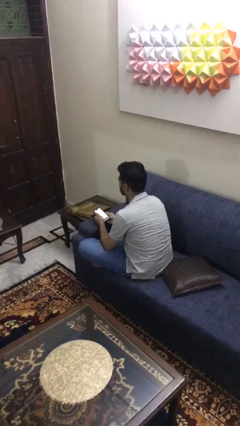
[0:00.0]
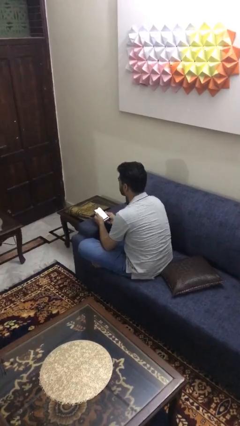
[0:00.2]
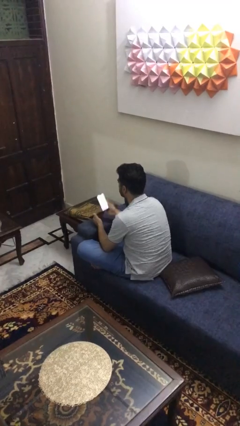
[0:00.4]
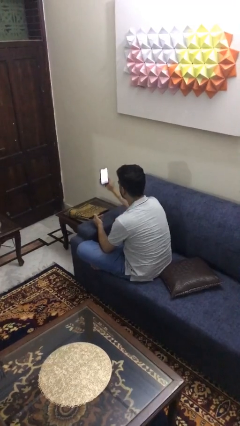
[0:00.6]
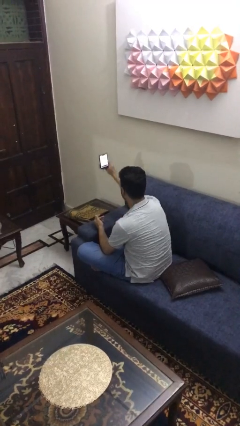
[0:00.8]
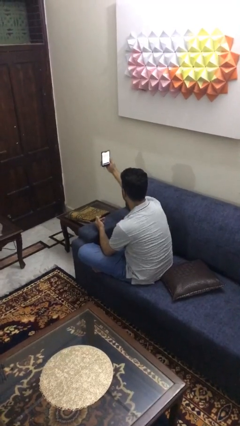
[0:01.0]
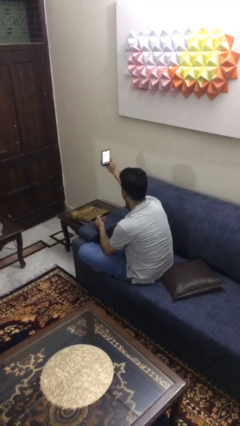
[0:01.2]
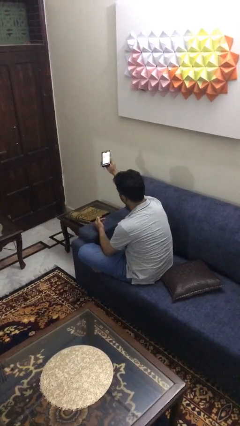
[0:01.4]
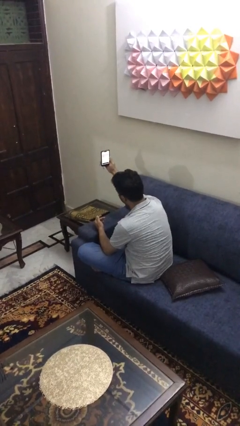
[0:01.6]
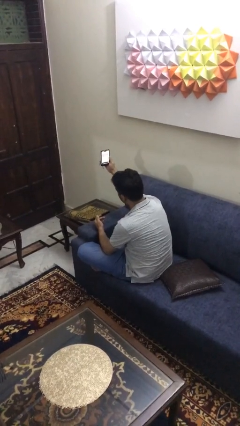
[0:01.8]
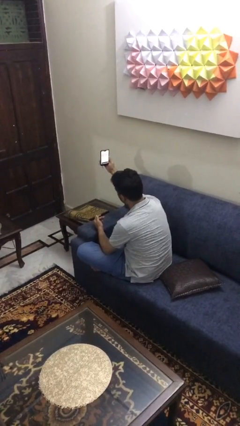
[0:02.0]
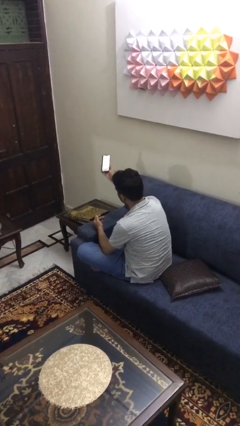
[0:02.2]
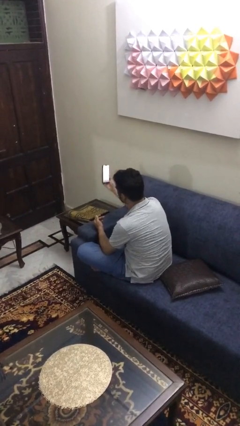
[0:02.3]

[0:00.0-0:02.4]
person takes selfie

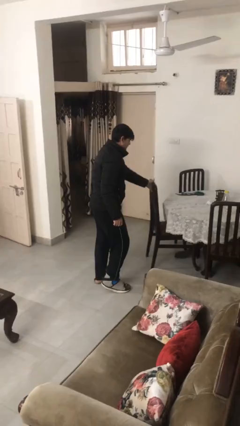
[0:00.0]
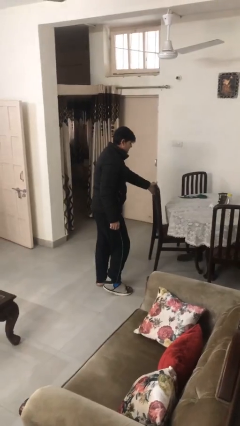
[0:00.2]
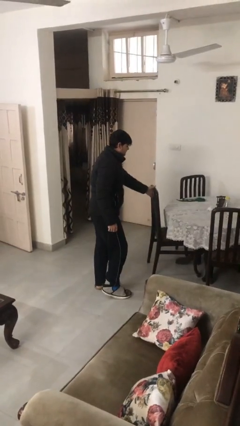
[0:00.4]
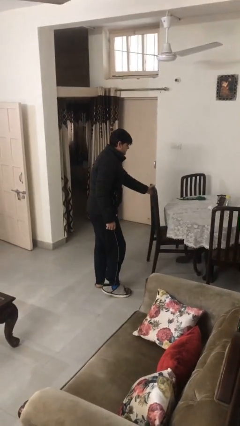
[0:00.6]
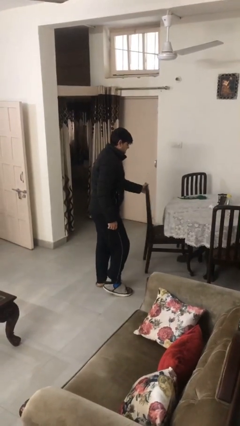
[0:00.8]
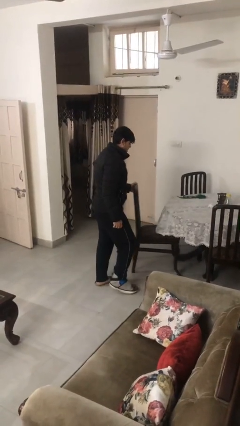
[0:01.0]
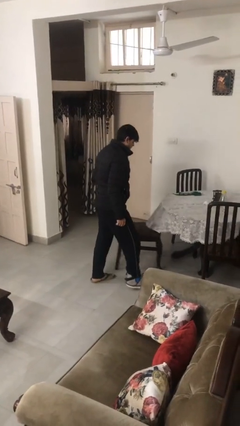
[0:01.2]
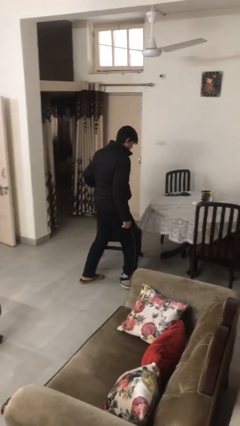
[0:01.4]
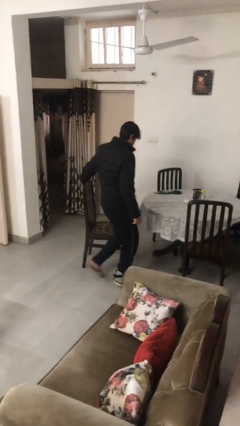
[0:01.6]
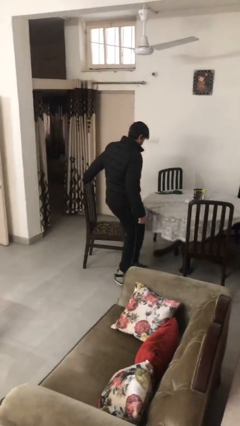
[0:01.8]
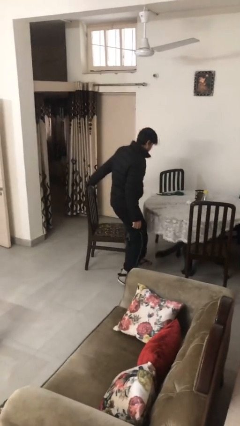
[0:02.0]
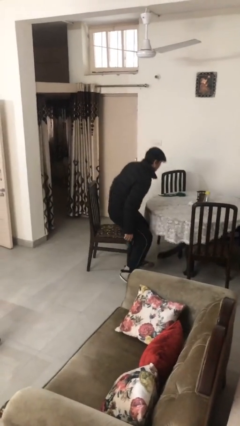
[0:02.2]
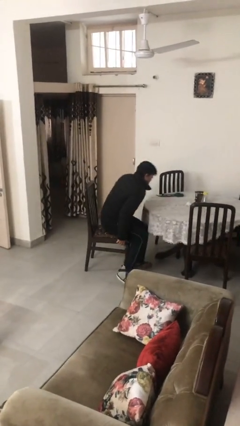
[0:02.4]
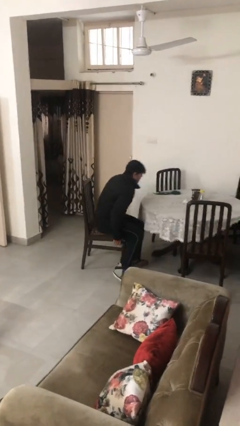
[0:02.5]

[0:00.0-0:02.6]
person sits down

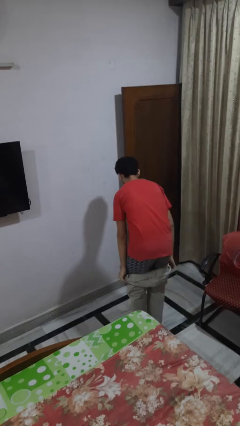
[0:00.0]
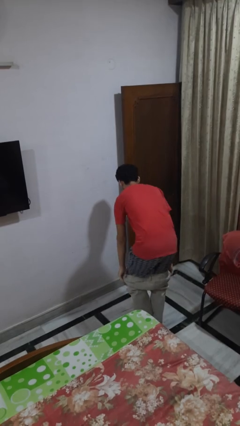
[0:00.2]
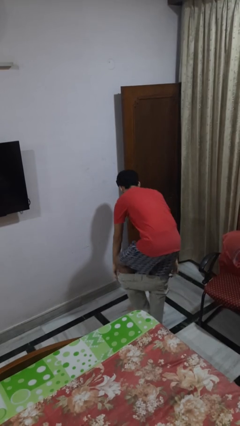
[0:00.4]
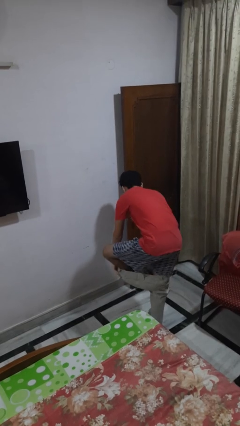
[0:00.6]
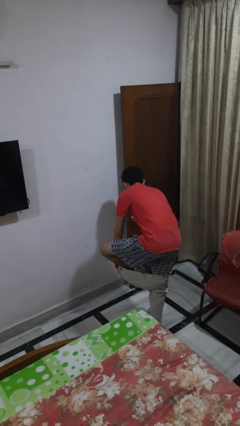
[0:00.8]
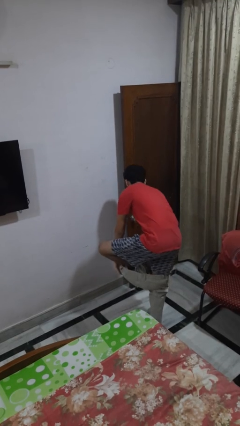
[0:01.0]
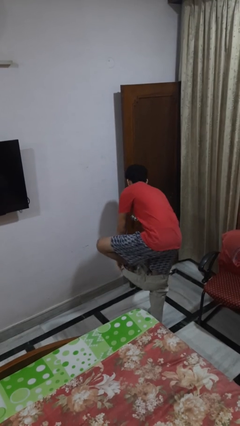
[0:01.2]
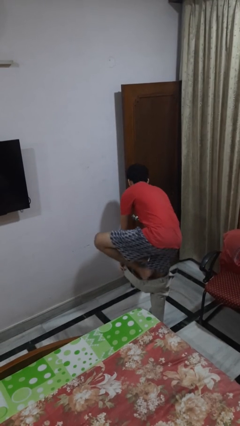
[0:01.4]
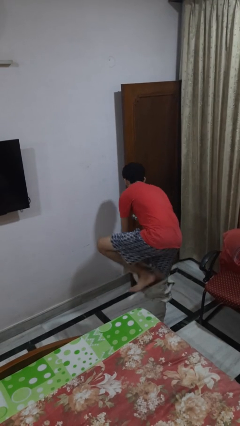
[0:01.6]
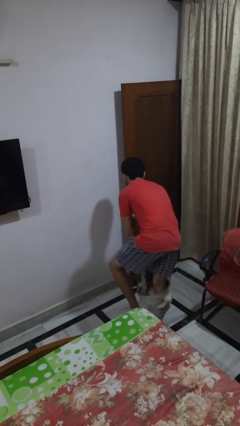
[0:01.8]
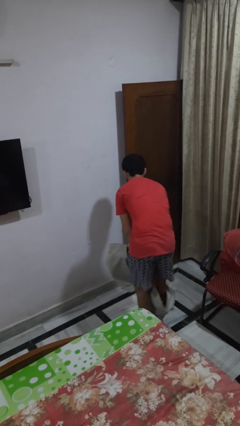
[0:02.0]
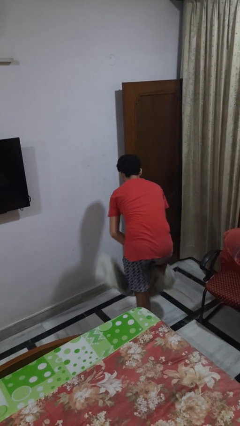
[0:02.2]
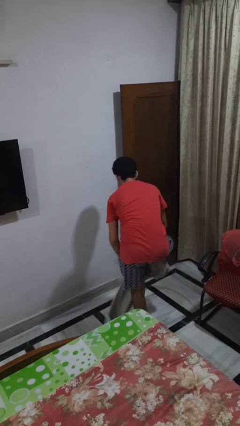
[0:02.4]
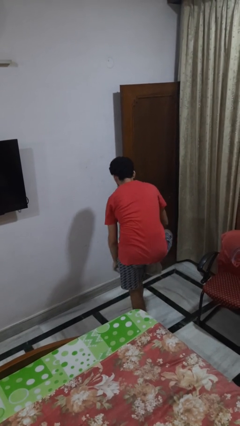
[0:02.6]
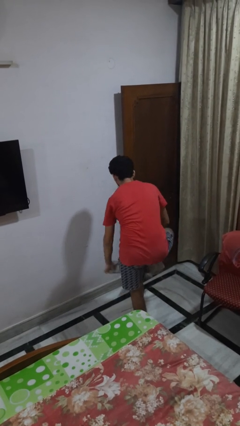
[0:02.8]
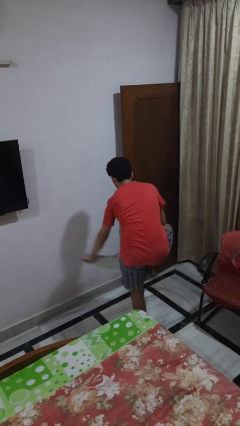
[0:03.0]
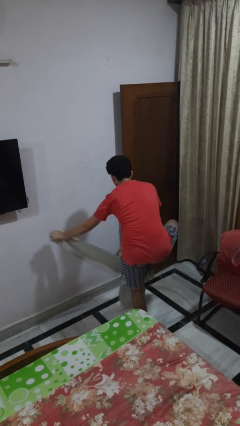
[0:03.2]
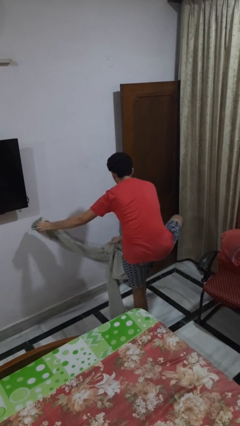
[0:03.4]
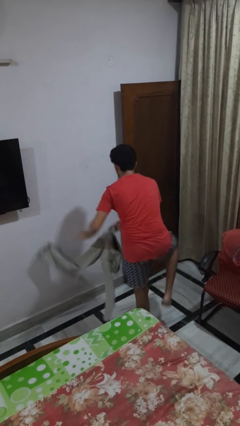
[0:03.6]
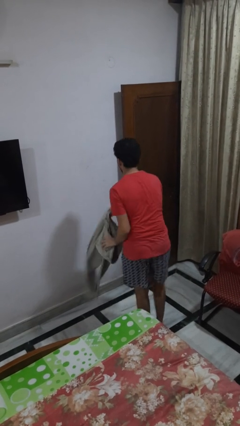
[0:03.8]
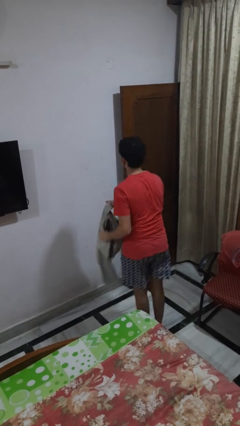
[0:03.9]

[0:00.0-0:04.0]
person takes off pants

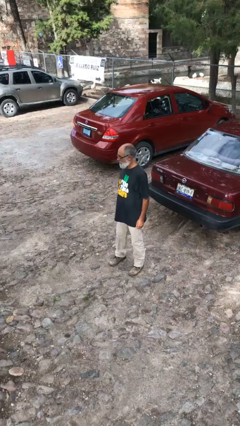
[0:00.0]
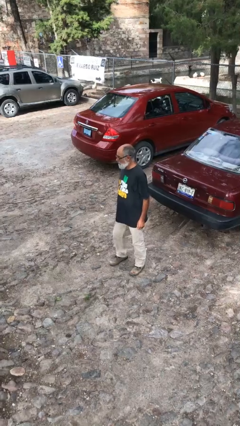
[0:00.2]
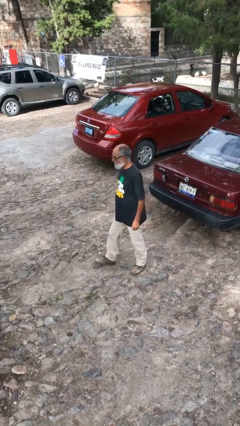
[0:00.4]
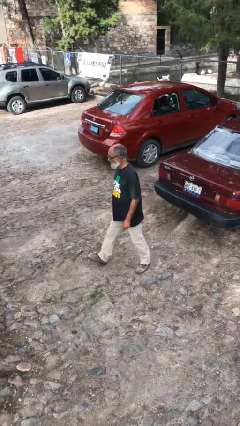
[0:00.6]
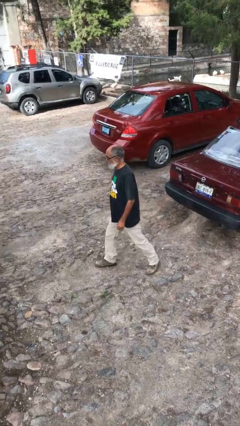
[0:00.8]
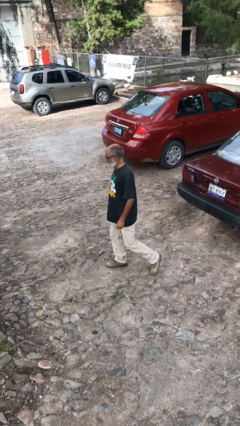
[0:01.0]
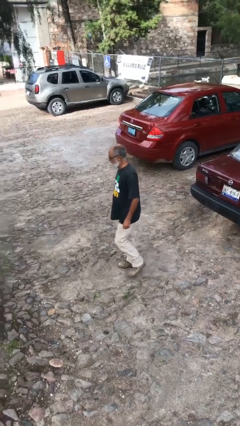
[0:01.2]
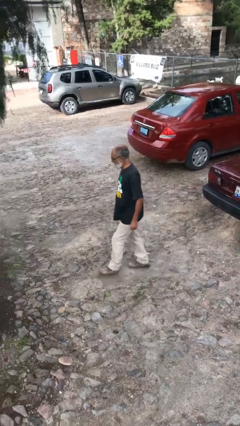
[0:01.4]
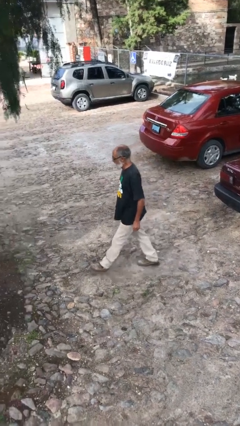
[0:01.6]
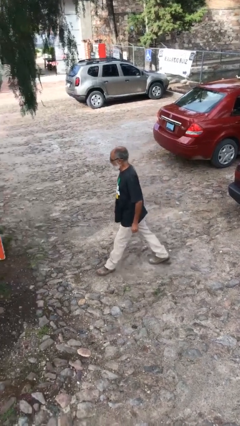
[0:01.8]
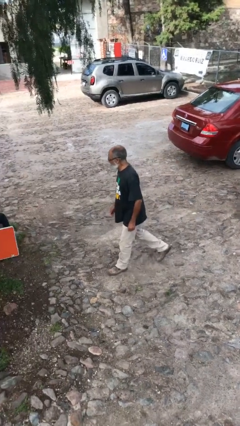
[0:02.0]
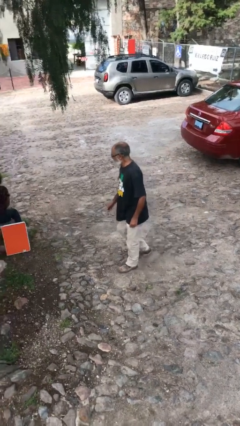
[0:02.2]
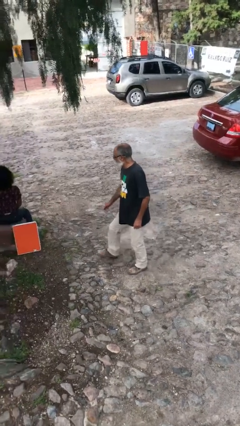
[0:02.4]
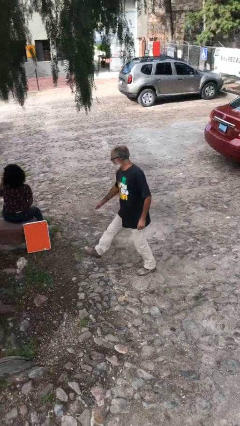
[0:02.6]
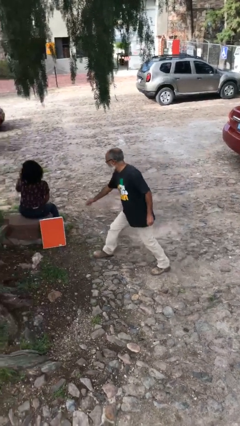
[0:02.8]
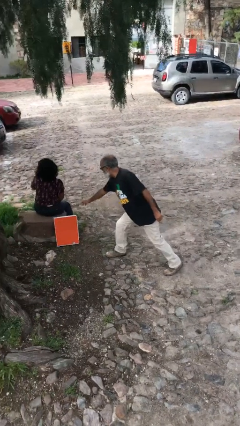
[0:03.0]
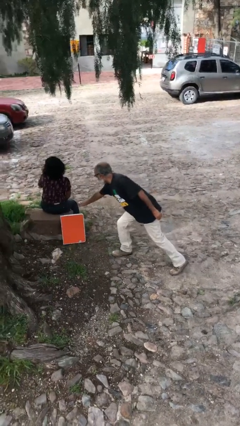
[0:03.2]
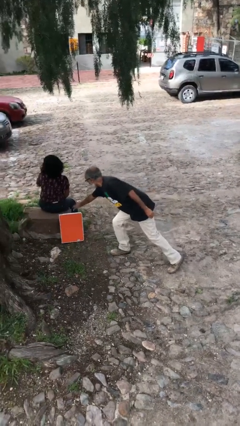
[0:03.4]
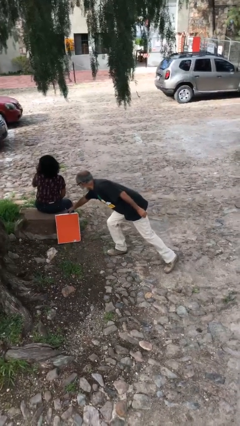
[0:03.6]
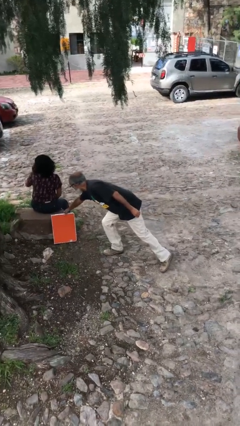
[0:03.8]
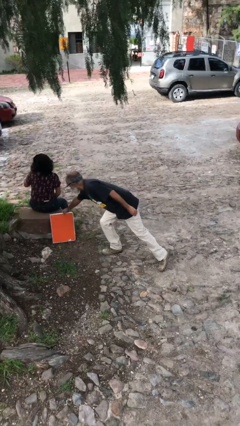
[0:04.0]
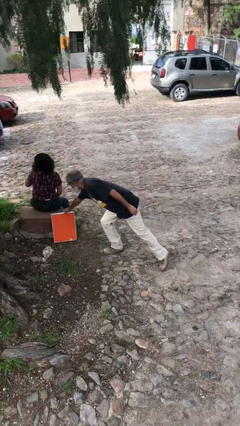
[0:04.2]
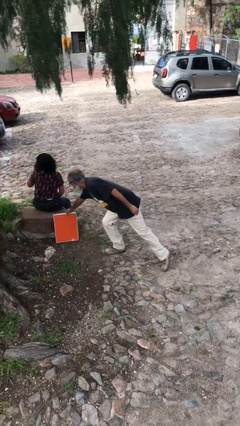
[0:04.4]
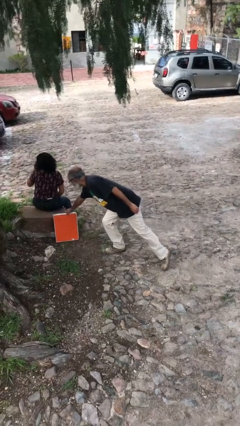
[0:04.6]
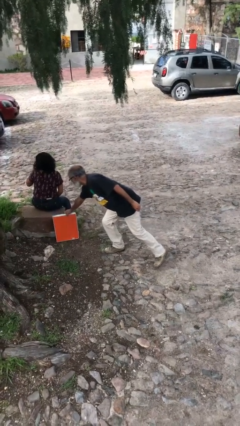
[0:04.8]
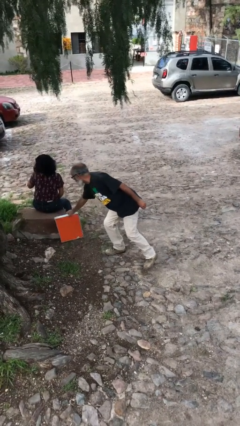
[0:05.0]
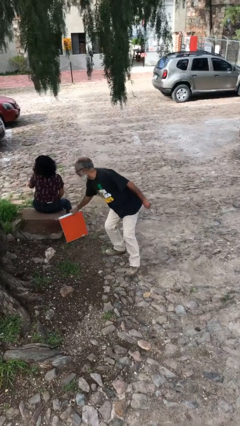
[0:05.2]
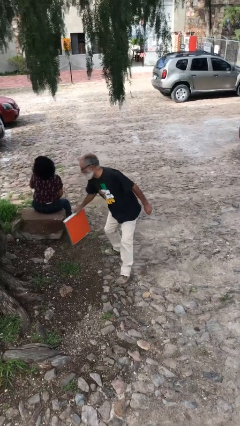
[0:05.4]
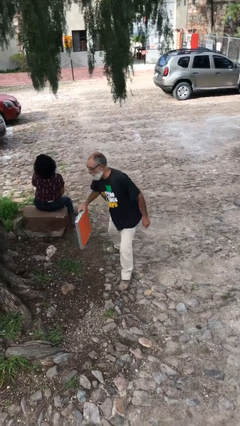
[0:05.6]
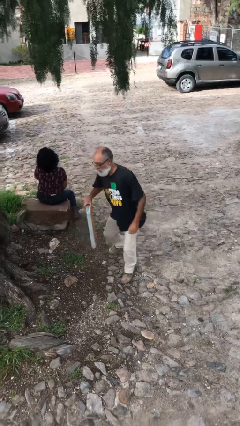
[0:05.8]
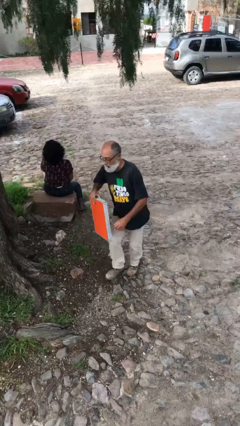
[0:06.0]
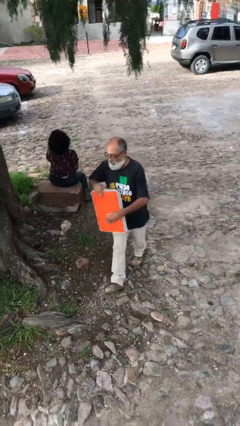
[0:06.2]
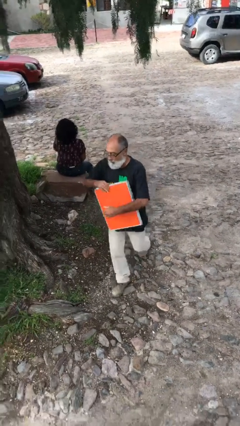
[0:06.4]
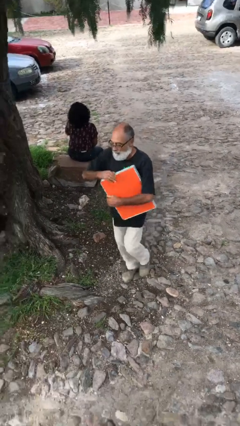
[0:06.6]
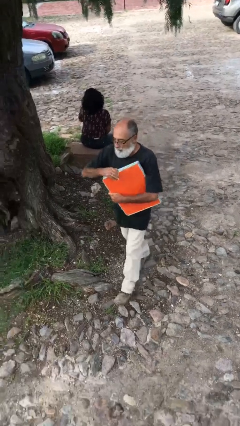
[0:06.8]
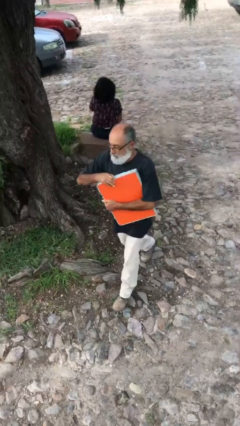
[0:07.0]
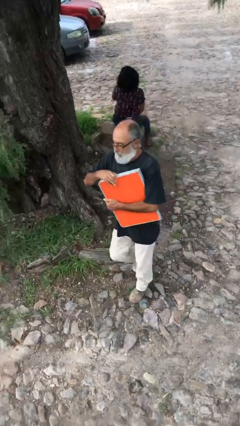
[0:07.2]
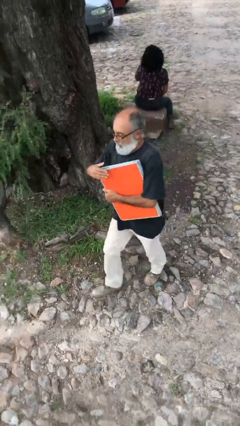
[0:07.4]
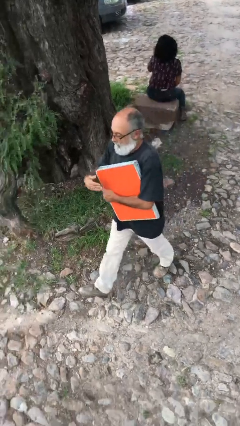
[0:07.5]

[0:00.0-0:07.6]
person steals object from person

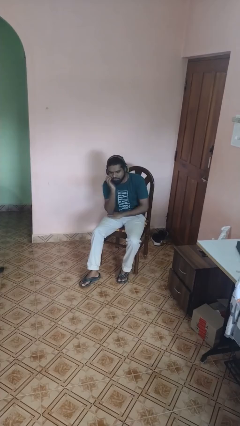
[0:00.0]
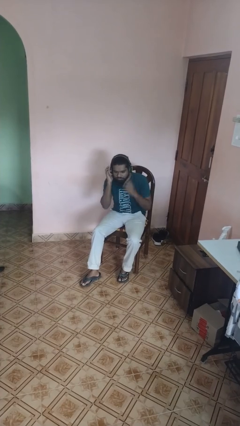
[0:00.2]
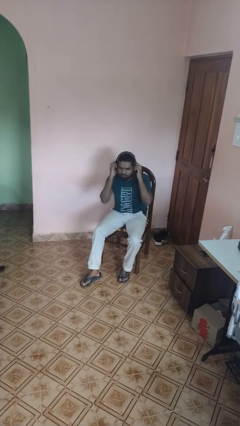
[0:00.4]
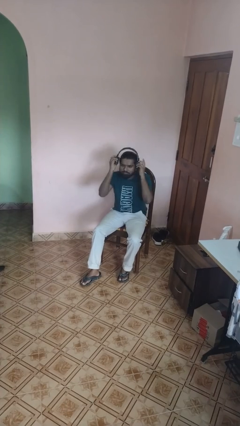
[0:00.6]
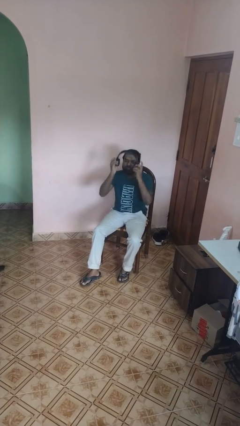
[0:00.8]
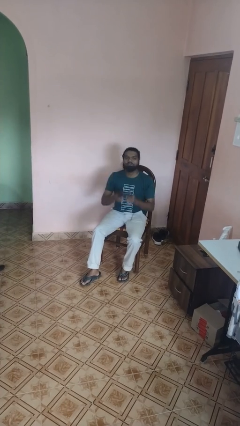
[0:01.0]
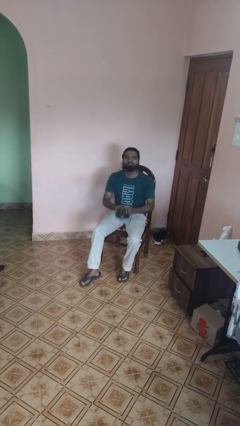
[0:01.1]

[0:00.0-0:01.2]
person takes off headphones
